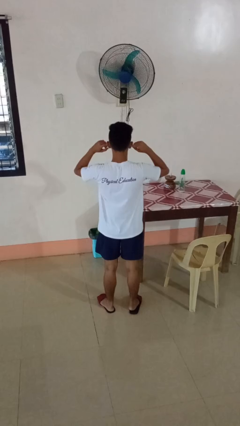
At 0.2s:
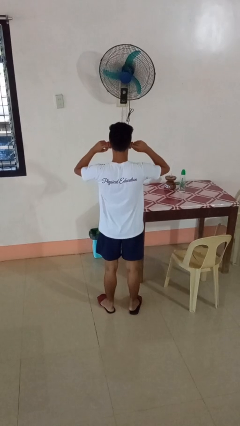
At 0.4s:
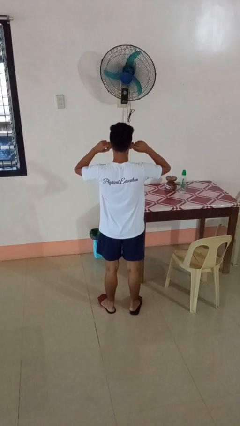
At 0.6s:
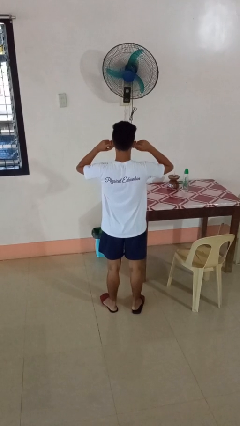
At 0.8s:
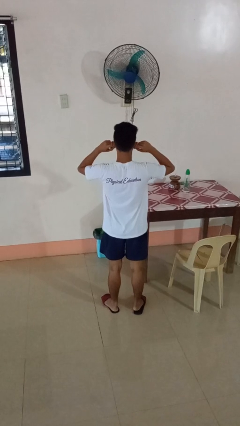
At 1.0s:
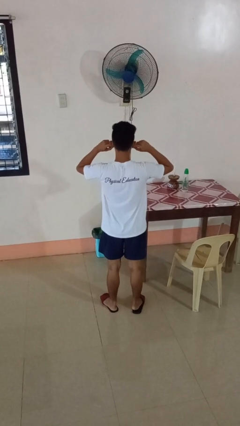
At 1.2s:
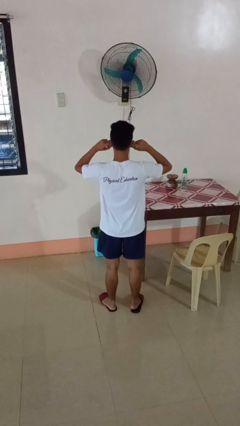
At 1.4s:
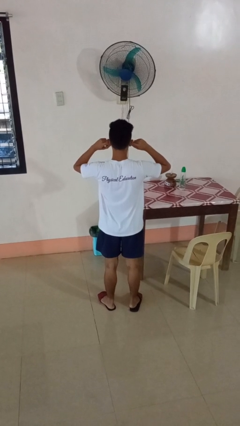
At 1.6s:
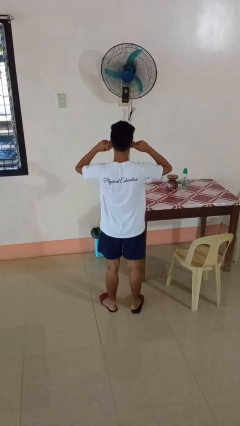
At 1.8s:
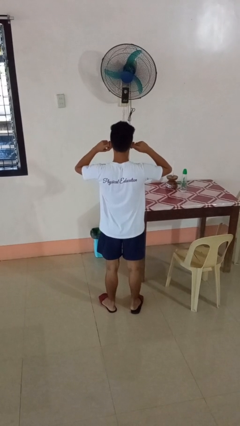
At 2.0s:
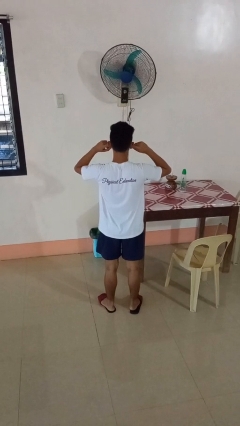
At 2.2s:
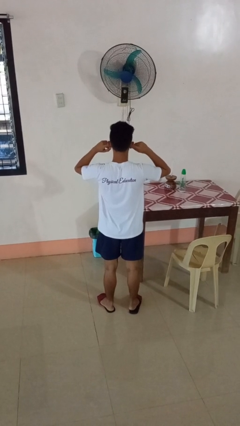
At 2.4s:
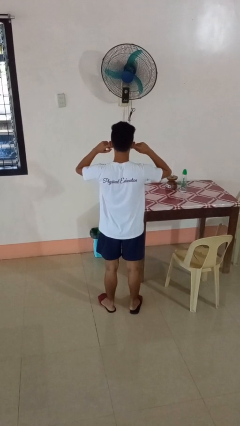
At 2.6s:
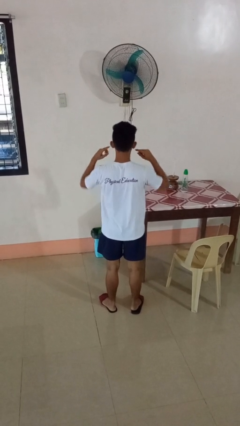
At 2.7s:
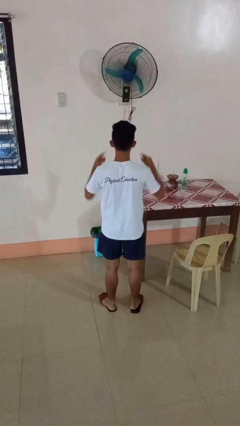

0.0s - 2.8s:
person puts fingers in ear

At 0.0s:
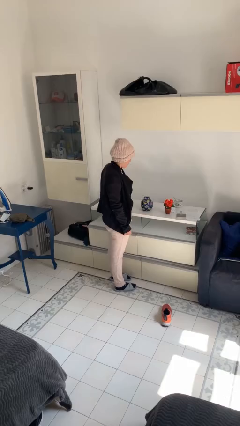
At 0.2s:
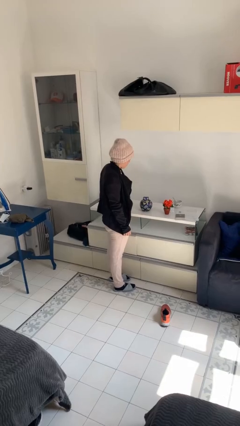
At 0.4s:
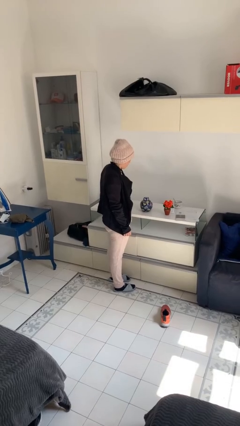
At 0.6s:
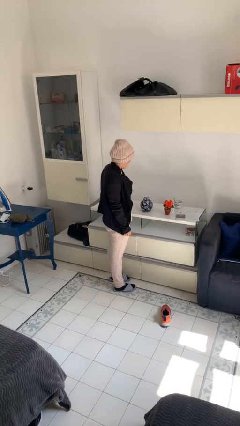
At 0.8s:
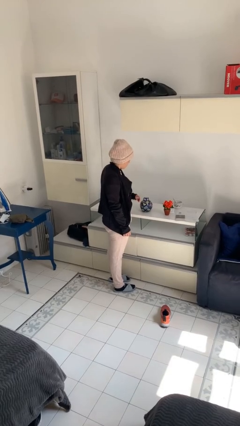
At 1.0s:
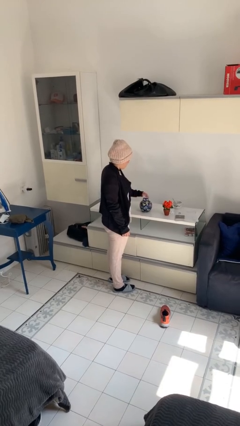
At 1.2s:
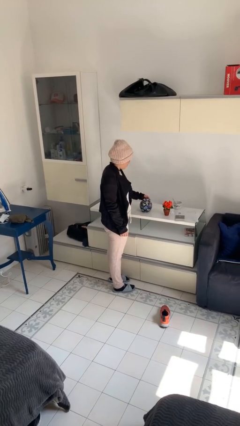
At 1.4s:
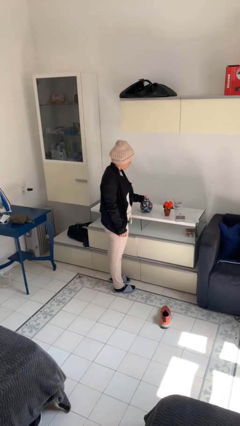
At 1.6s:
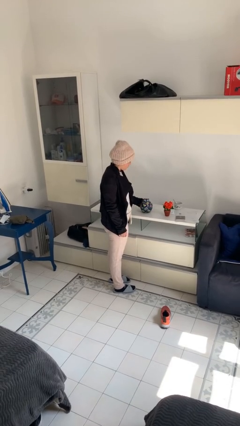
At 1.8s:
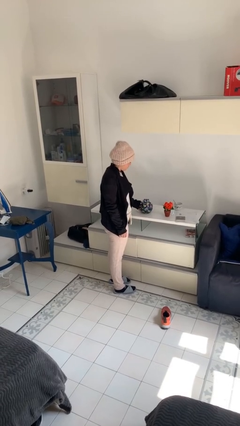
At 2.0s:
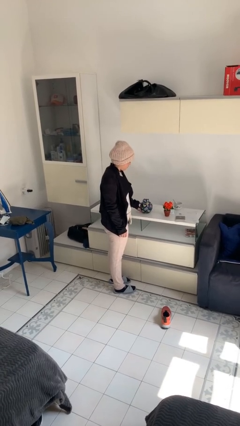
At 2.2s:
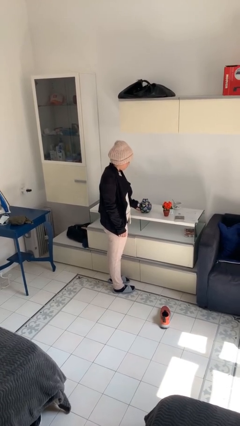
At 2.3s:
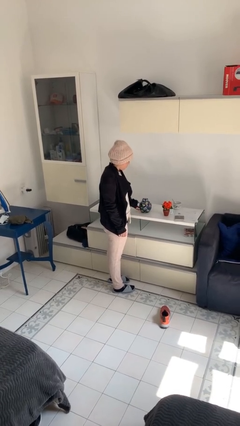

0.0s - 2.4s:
person waves hand over object

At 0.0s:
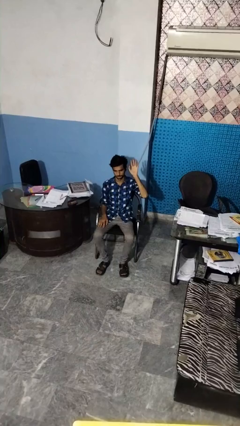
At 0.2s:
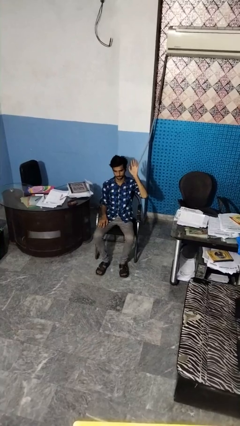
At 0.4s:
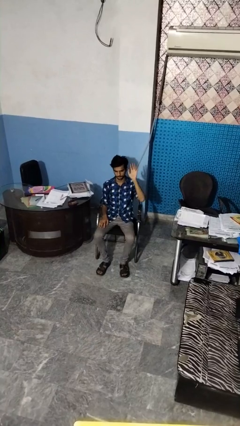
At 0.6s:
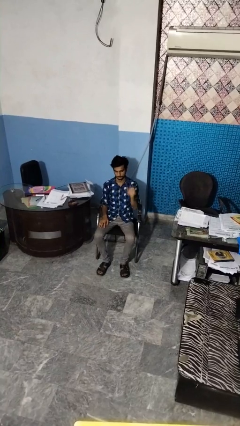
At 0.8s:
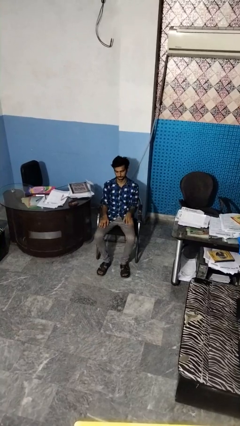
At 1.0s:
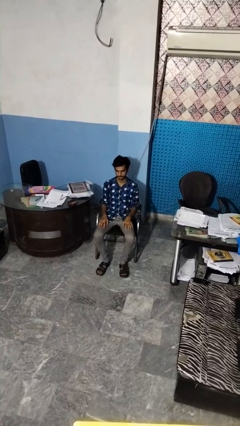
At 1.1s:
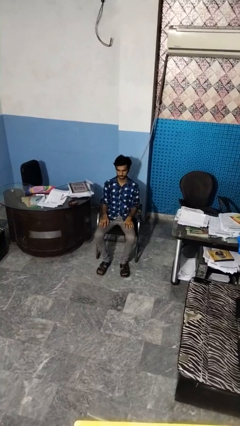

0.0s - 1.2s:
person gestures lower hand

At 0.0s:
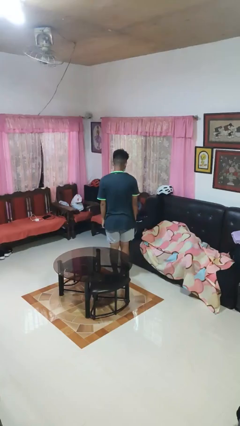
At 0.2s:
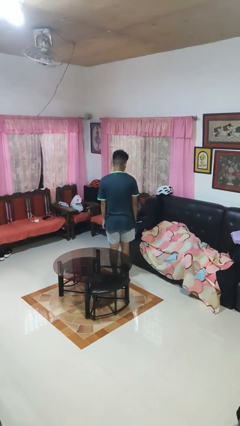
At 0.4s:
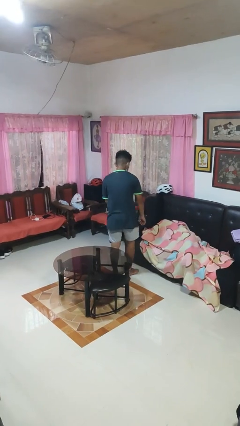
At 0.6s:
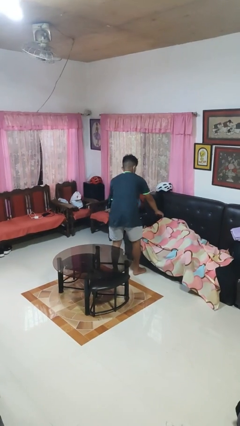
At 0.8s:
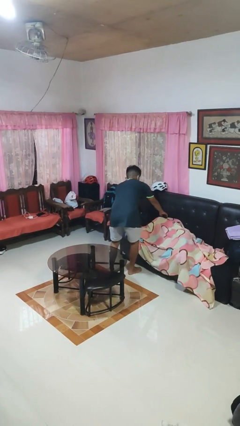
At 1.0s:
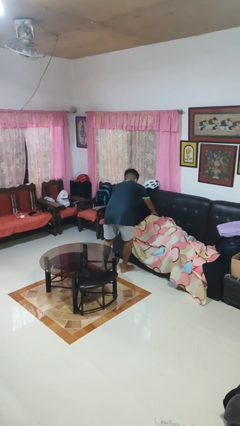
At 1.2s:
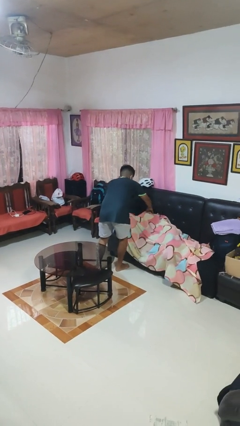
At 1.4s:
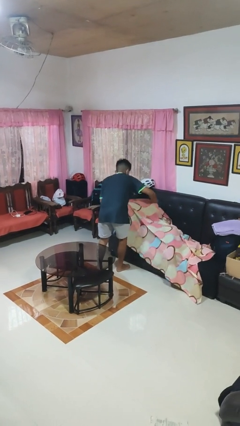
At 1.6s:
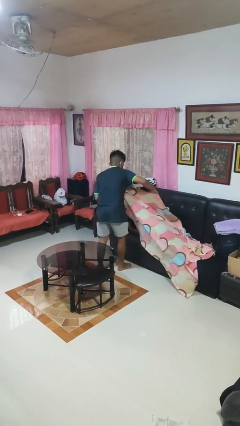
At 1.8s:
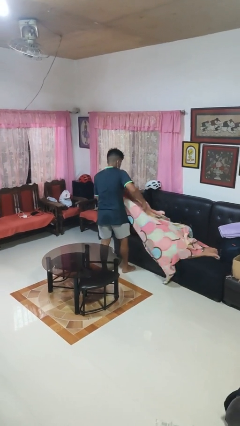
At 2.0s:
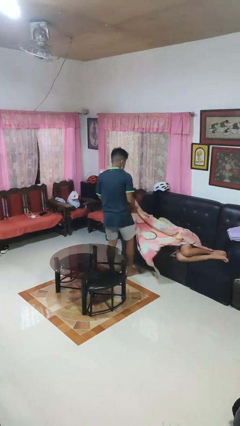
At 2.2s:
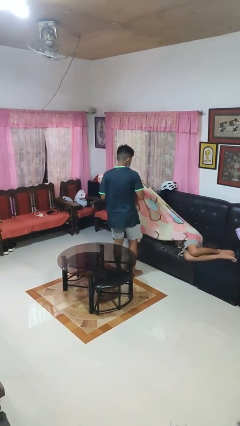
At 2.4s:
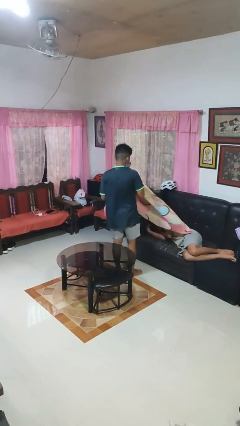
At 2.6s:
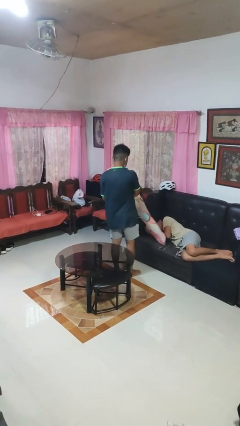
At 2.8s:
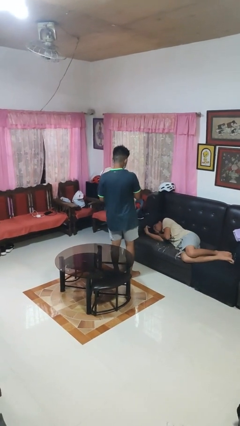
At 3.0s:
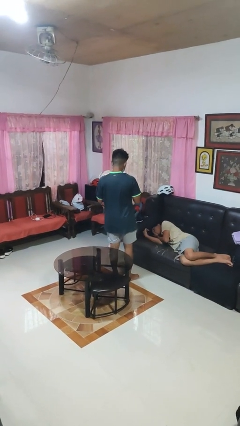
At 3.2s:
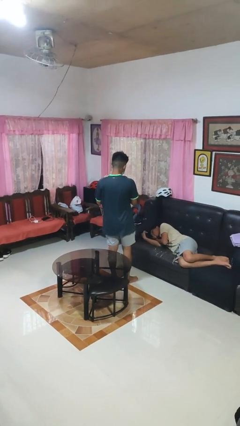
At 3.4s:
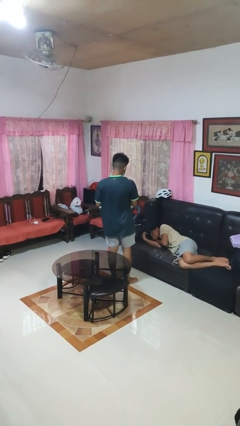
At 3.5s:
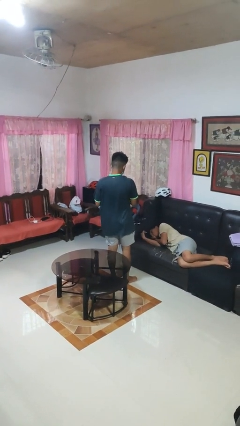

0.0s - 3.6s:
person uncovers friend with blanket

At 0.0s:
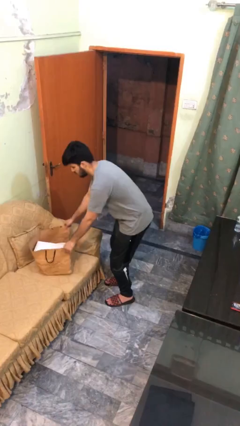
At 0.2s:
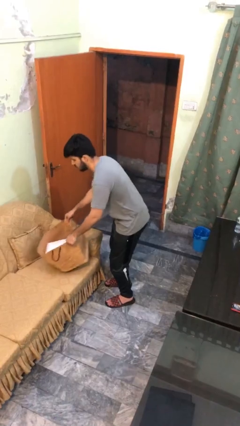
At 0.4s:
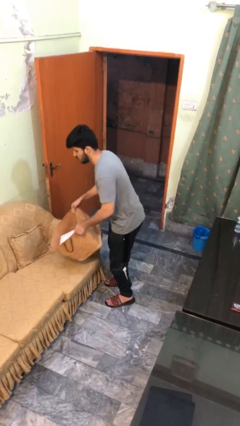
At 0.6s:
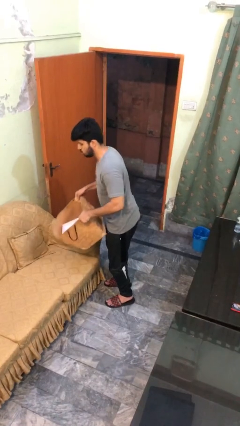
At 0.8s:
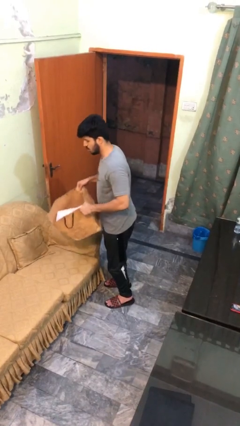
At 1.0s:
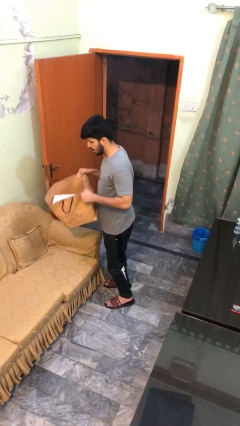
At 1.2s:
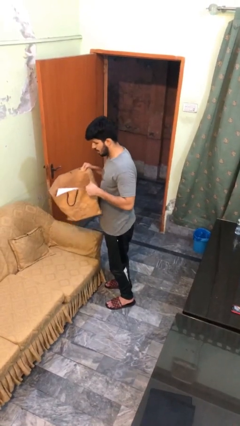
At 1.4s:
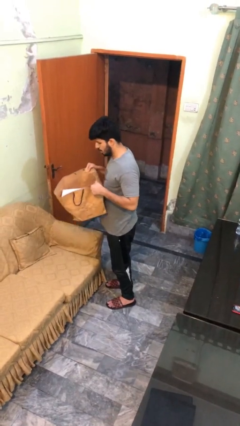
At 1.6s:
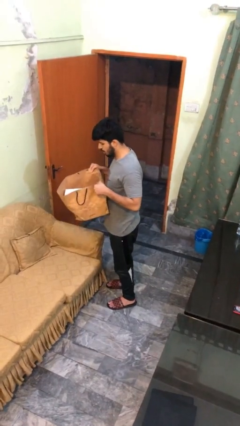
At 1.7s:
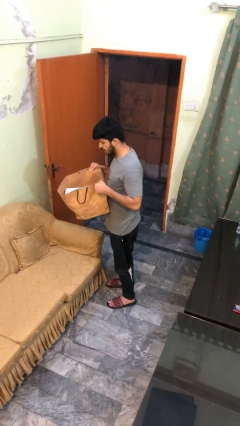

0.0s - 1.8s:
person picks up object from couch

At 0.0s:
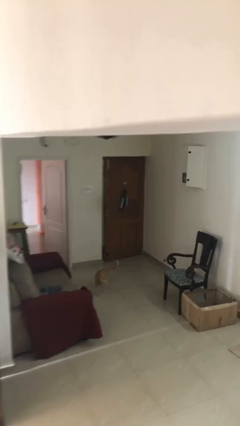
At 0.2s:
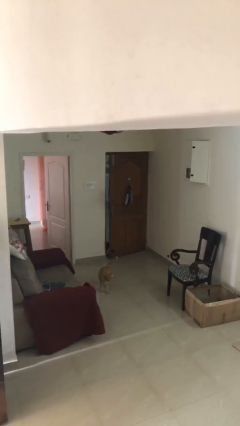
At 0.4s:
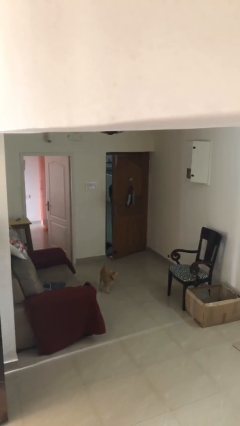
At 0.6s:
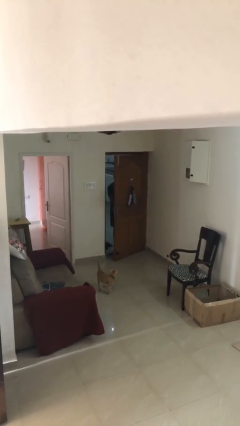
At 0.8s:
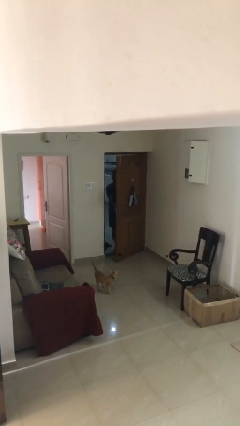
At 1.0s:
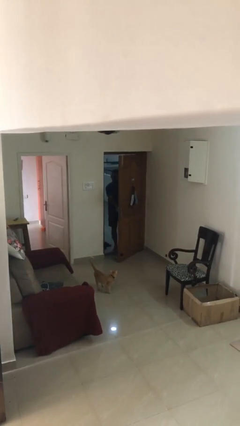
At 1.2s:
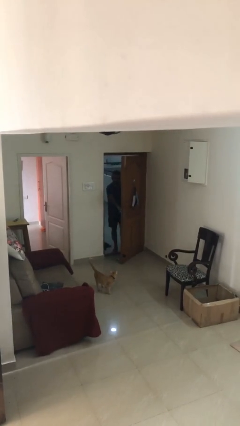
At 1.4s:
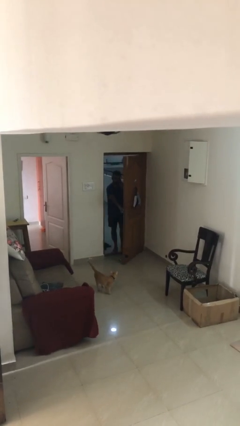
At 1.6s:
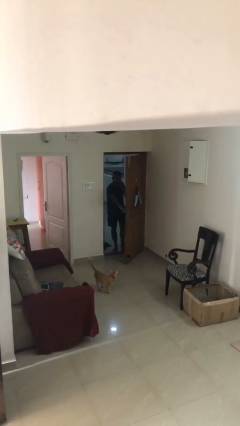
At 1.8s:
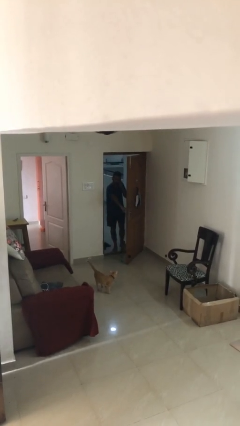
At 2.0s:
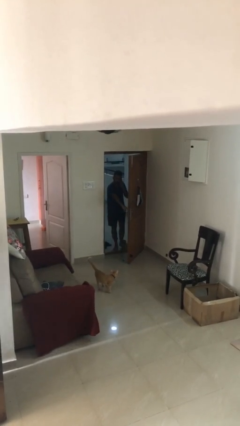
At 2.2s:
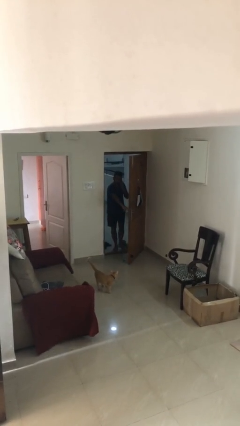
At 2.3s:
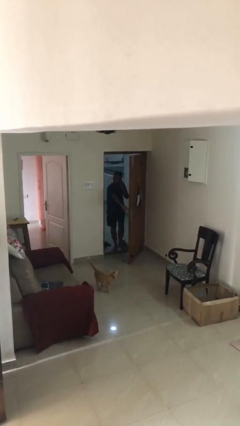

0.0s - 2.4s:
person opens facility door

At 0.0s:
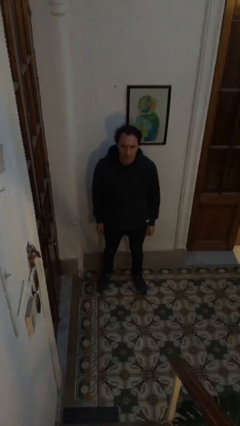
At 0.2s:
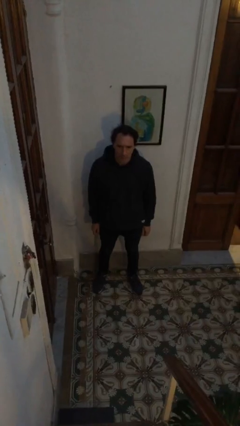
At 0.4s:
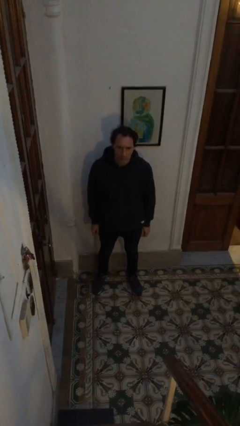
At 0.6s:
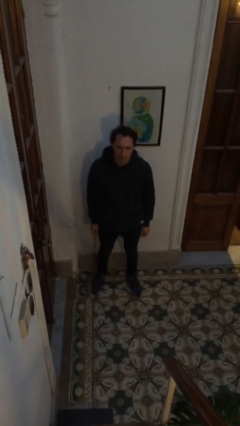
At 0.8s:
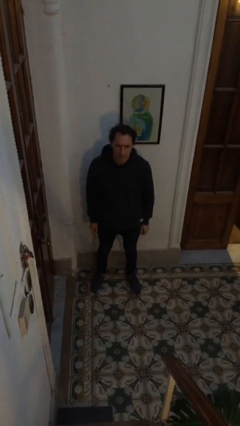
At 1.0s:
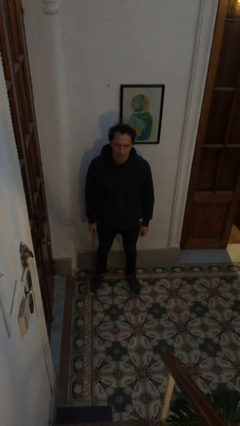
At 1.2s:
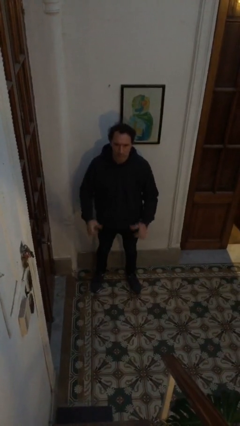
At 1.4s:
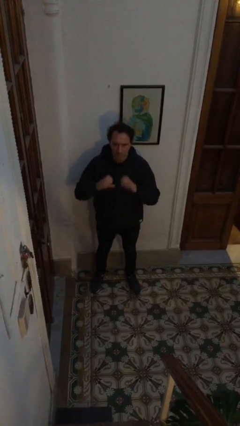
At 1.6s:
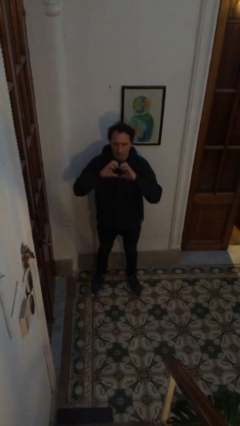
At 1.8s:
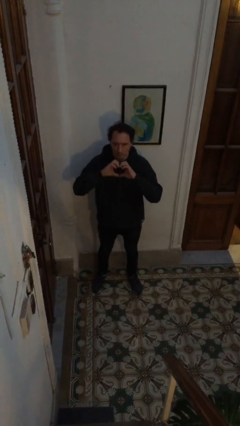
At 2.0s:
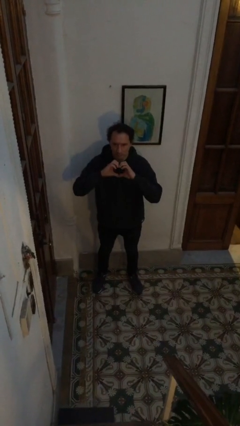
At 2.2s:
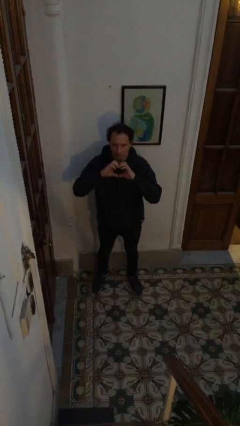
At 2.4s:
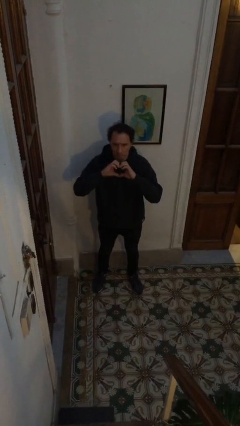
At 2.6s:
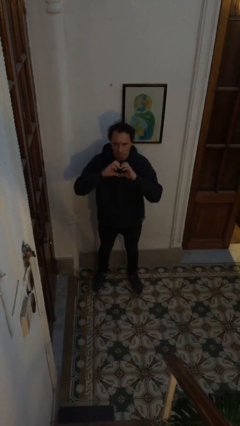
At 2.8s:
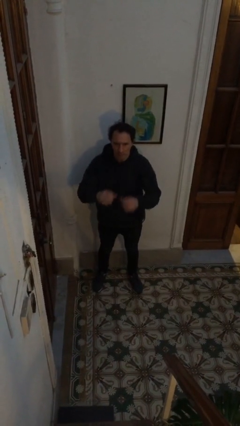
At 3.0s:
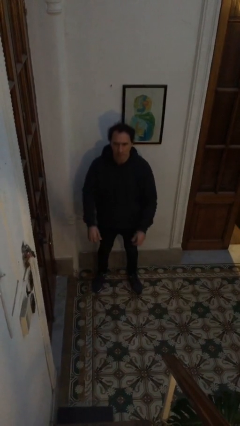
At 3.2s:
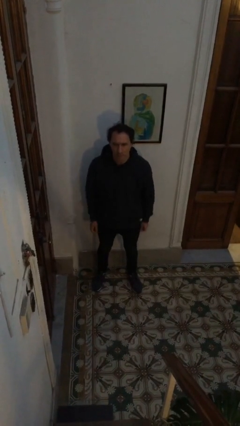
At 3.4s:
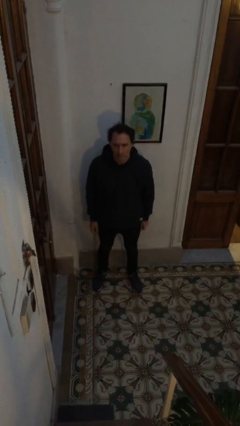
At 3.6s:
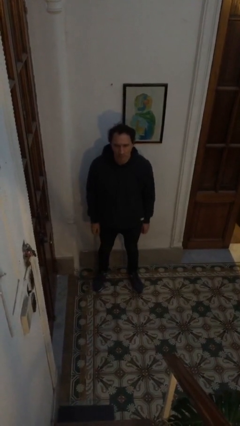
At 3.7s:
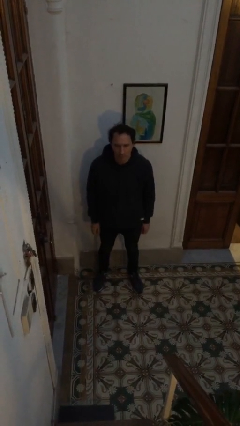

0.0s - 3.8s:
person gestures heart
